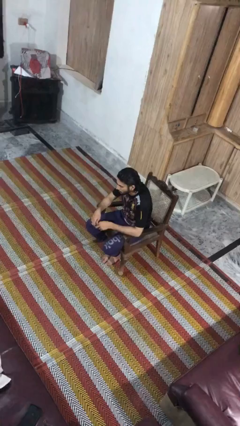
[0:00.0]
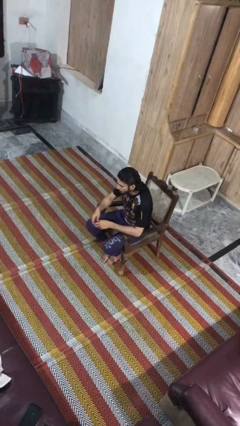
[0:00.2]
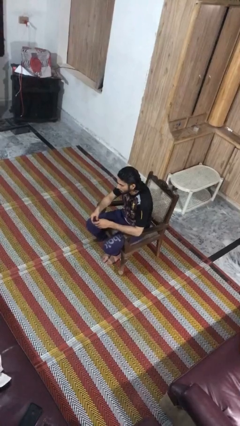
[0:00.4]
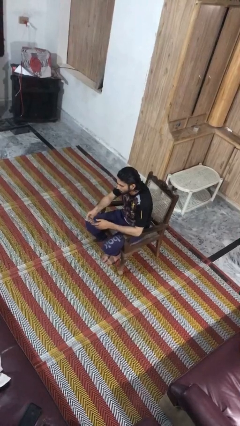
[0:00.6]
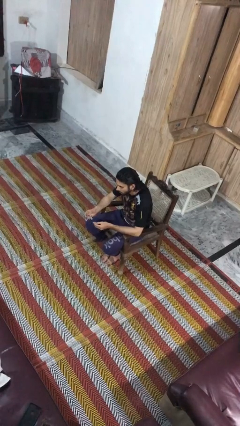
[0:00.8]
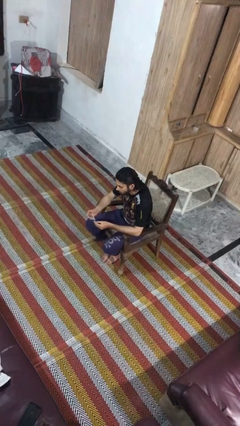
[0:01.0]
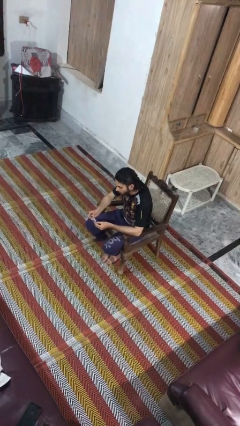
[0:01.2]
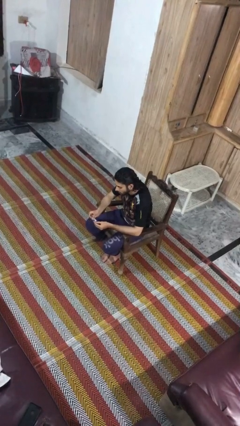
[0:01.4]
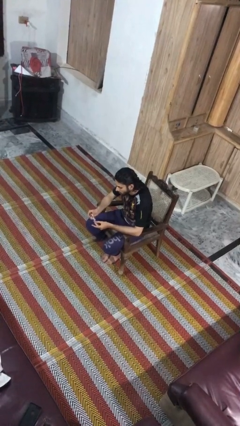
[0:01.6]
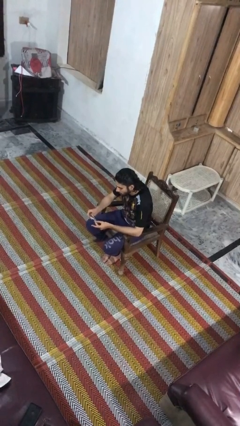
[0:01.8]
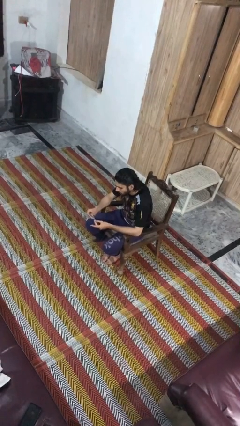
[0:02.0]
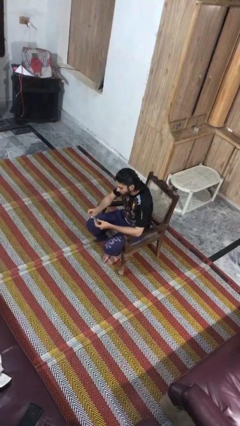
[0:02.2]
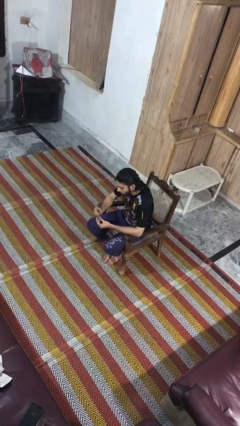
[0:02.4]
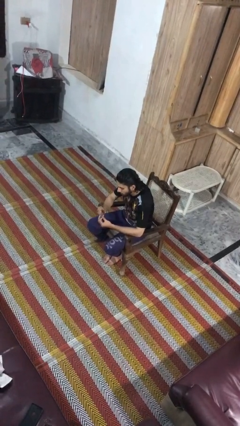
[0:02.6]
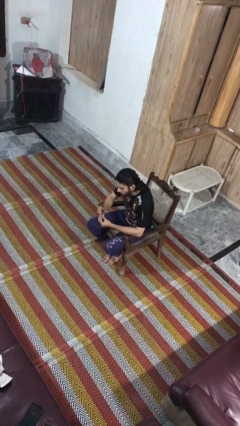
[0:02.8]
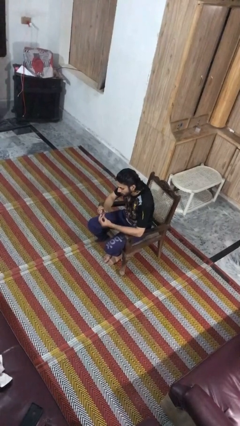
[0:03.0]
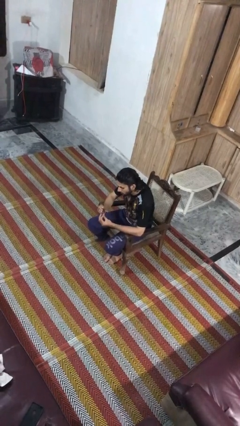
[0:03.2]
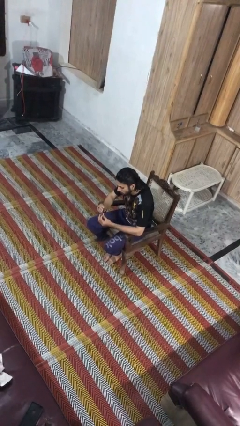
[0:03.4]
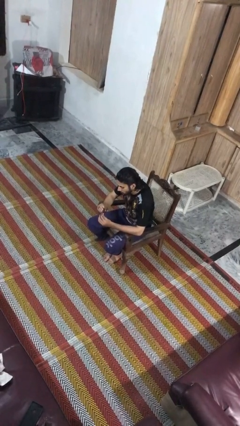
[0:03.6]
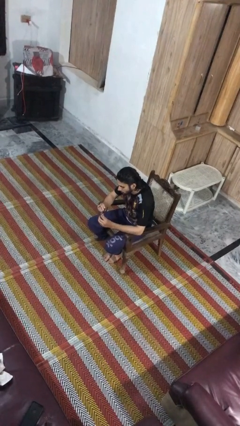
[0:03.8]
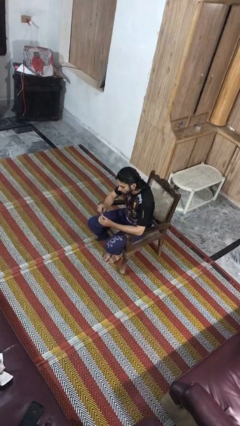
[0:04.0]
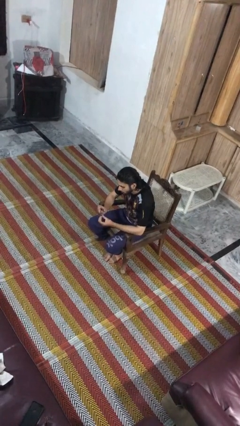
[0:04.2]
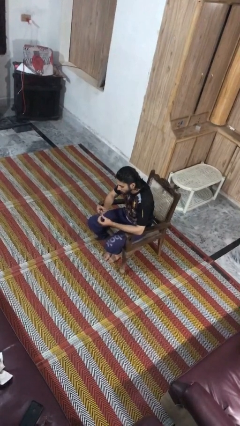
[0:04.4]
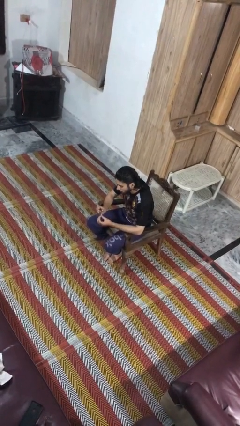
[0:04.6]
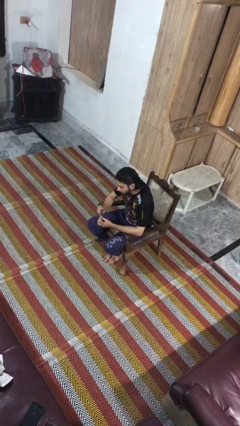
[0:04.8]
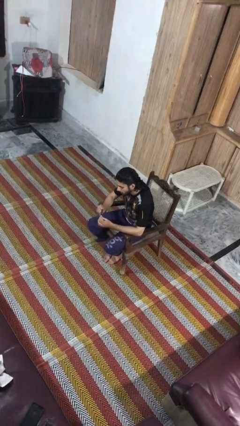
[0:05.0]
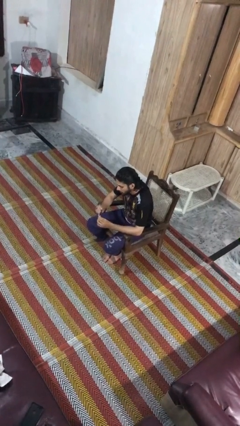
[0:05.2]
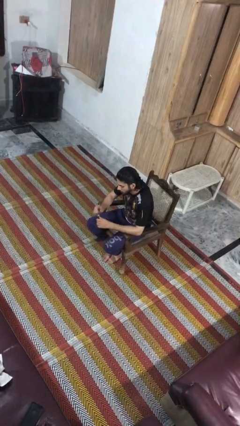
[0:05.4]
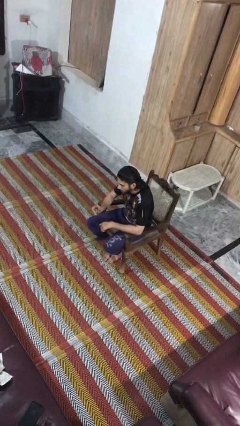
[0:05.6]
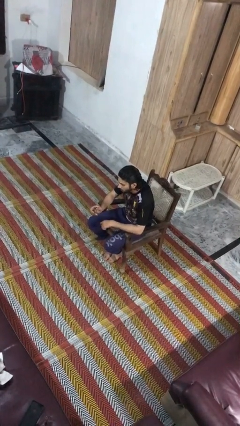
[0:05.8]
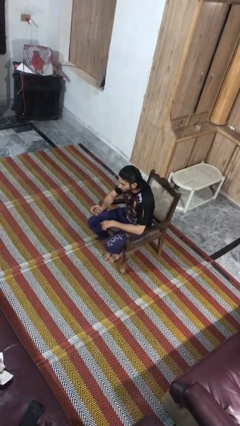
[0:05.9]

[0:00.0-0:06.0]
person clips fingernails

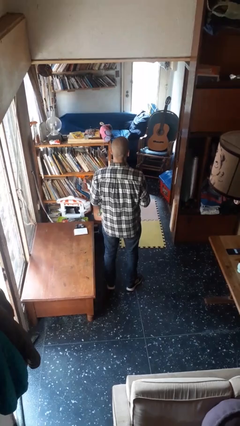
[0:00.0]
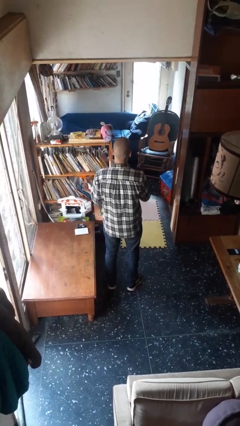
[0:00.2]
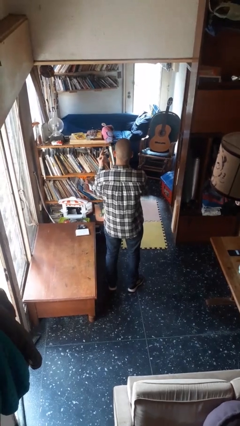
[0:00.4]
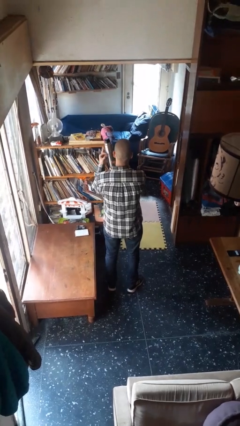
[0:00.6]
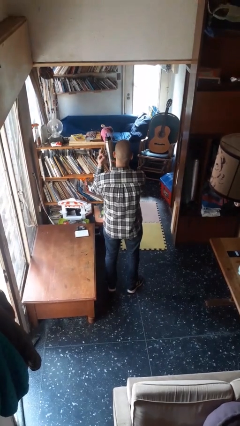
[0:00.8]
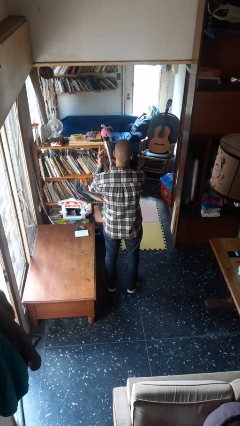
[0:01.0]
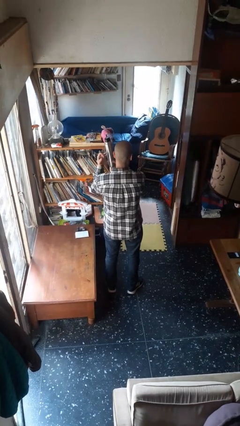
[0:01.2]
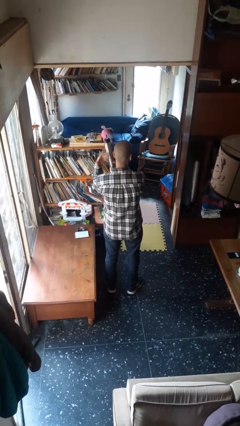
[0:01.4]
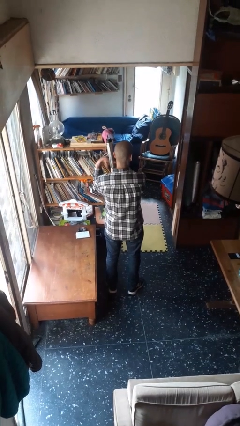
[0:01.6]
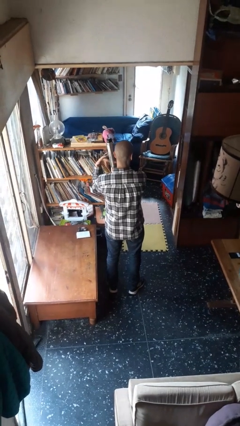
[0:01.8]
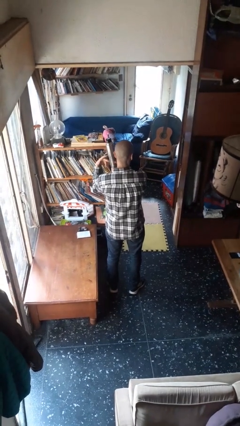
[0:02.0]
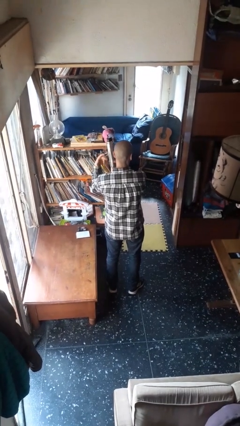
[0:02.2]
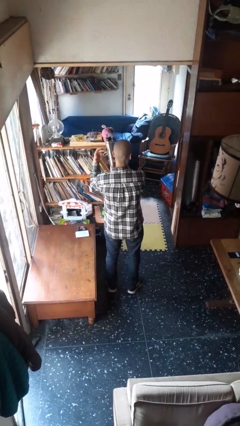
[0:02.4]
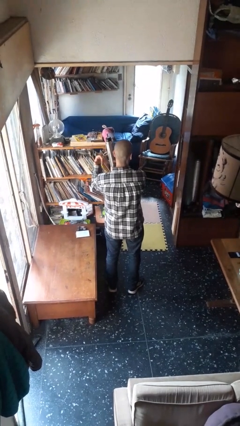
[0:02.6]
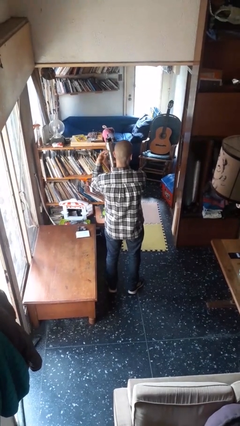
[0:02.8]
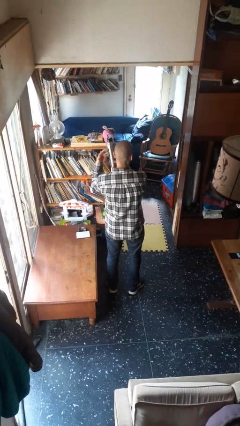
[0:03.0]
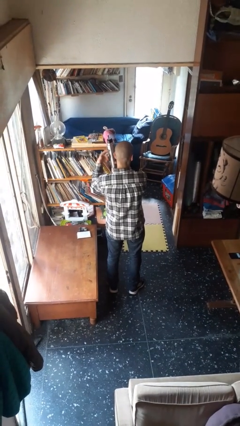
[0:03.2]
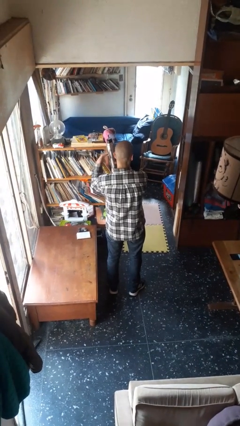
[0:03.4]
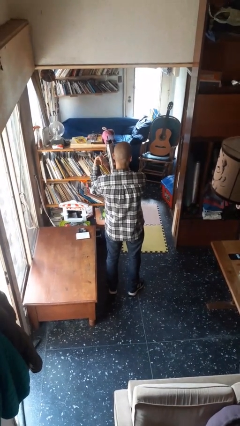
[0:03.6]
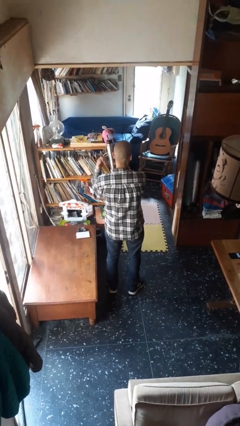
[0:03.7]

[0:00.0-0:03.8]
person taps object with finger

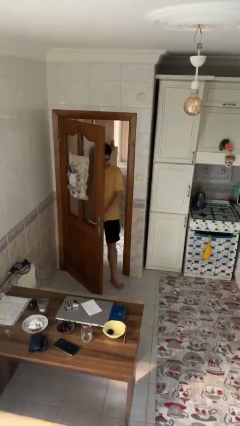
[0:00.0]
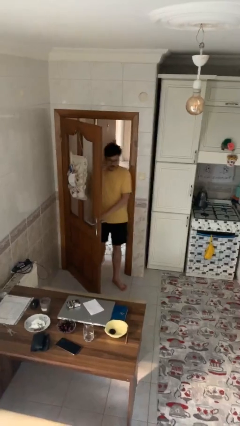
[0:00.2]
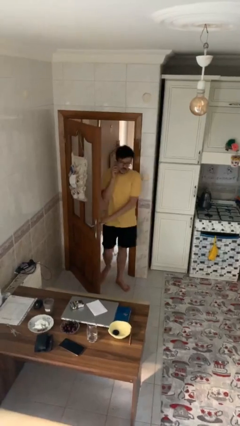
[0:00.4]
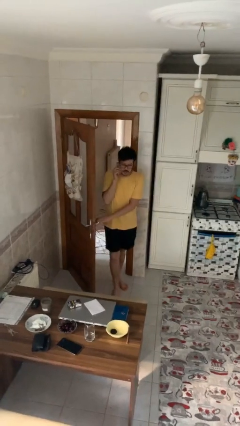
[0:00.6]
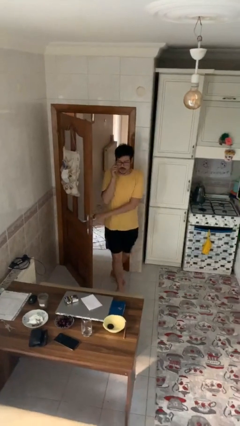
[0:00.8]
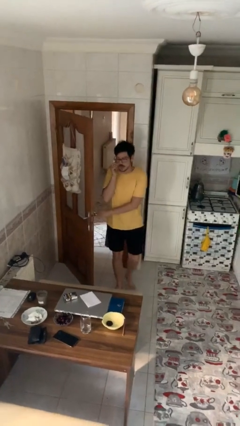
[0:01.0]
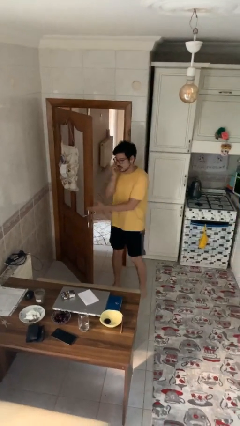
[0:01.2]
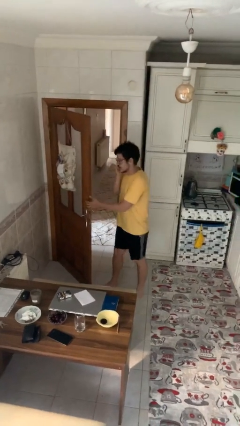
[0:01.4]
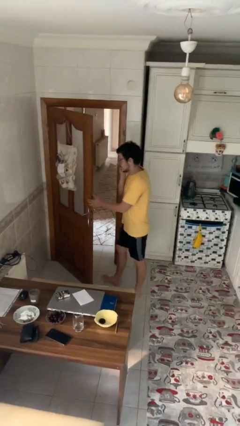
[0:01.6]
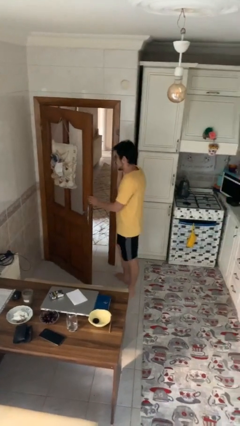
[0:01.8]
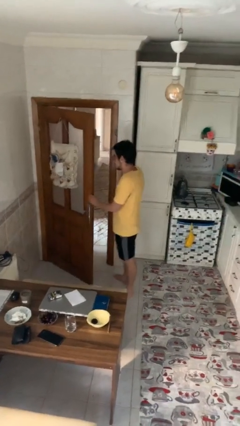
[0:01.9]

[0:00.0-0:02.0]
person enters scene through structure

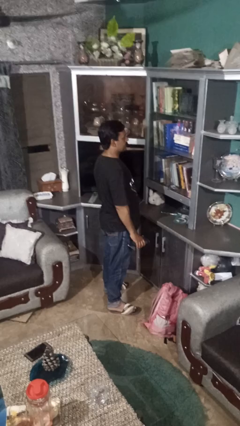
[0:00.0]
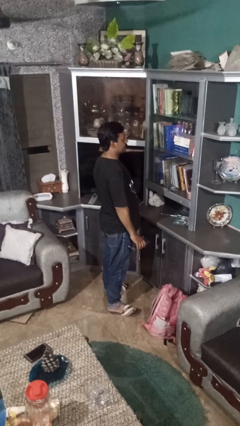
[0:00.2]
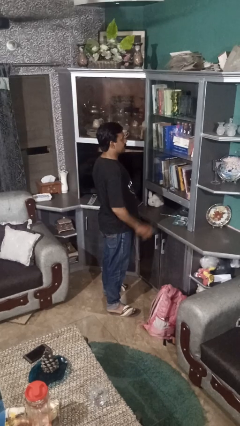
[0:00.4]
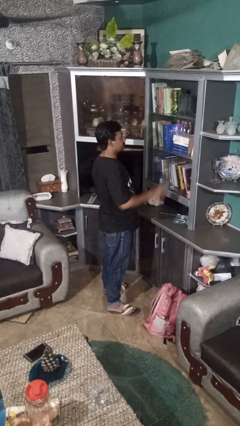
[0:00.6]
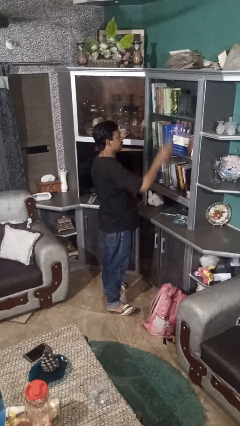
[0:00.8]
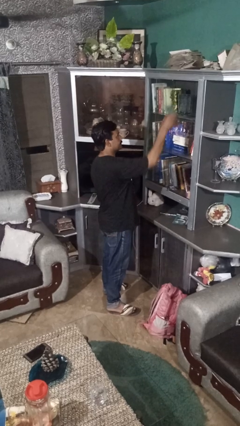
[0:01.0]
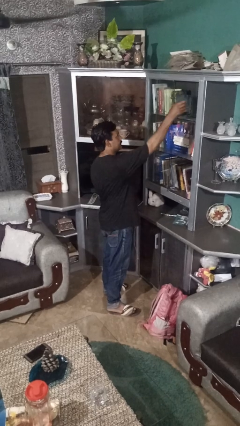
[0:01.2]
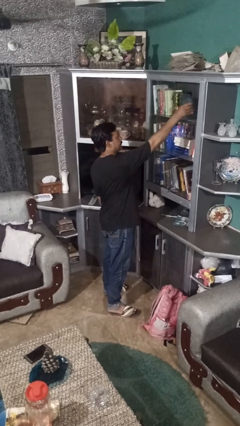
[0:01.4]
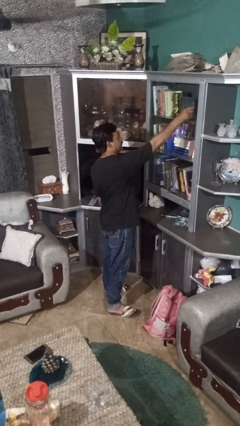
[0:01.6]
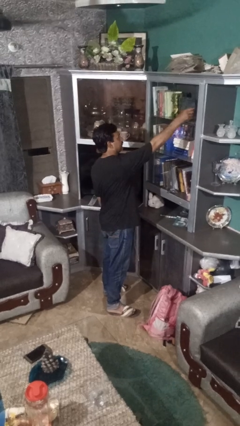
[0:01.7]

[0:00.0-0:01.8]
person puts down object on shelf

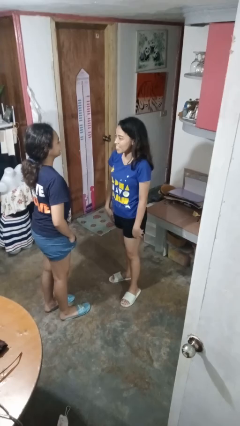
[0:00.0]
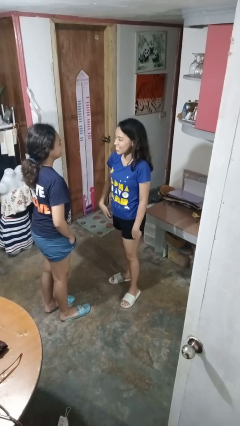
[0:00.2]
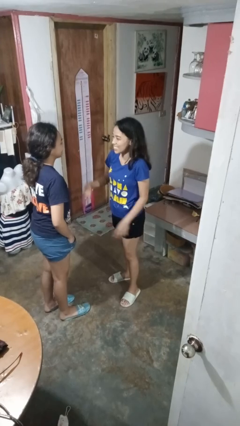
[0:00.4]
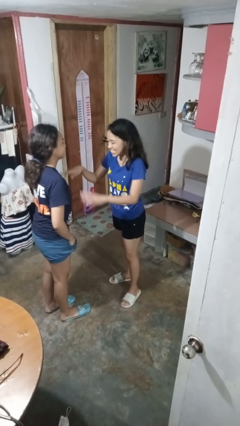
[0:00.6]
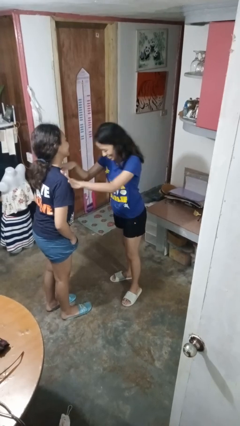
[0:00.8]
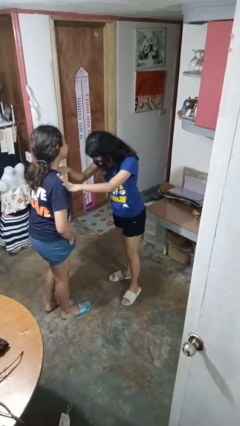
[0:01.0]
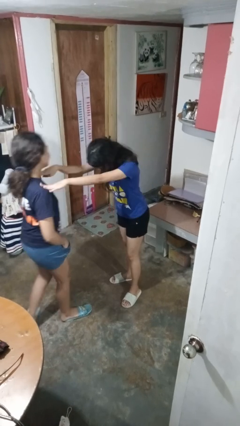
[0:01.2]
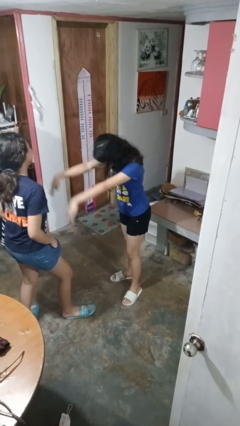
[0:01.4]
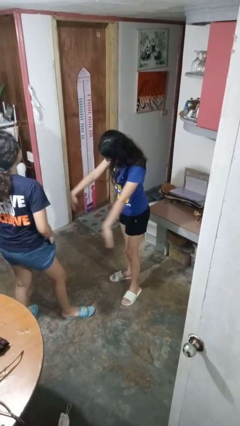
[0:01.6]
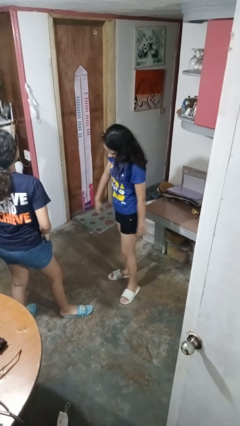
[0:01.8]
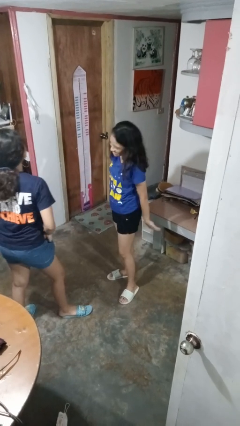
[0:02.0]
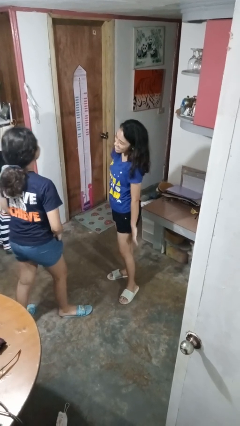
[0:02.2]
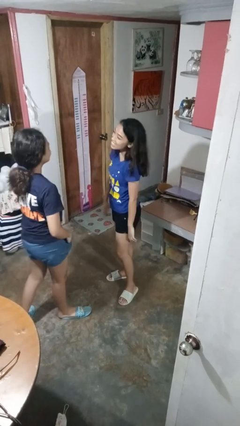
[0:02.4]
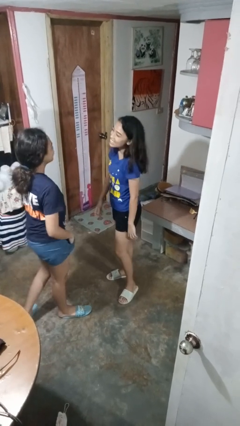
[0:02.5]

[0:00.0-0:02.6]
person shoves person

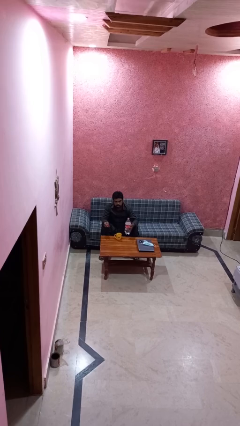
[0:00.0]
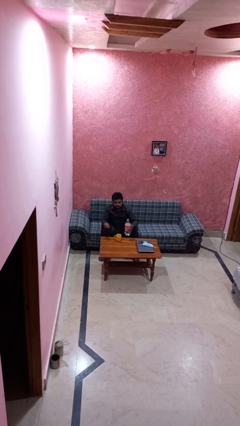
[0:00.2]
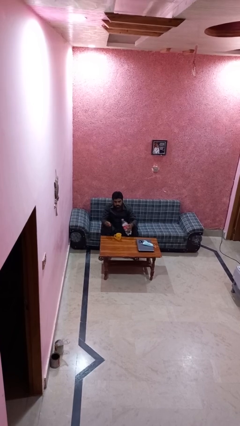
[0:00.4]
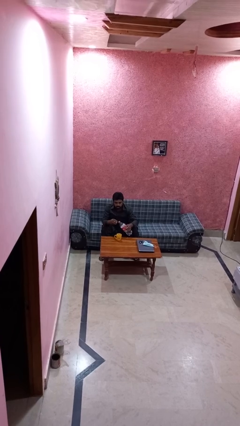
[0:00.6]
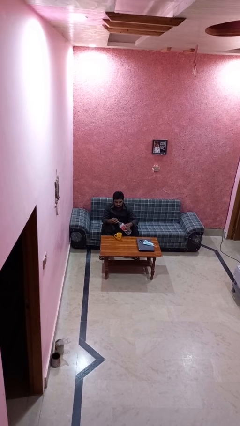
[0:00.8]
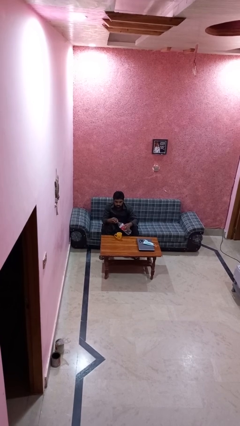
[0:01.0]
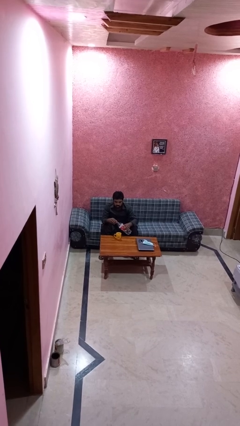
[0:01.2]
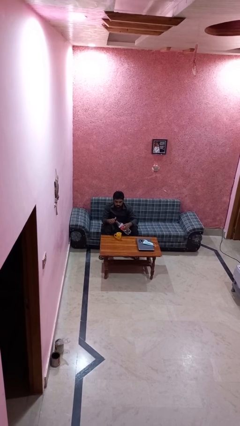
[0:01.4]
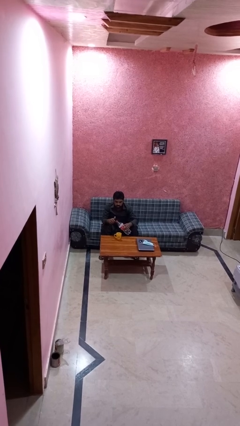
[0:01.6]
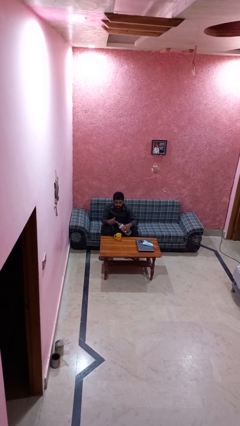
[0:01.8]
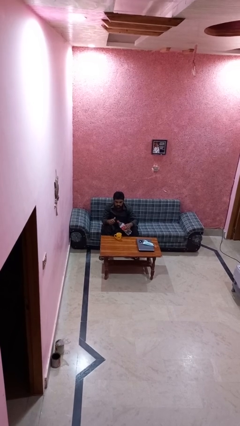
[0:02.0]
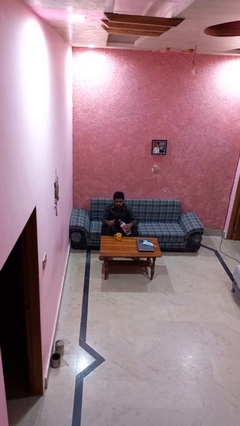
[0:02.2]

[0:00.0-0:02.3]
person screws lid to bottle
